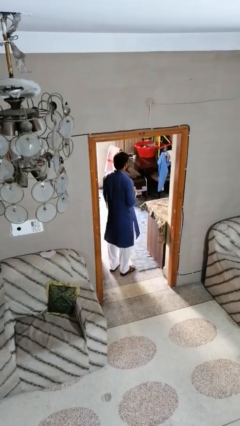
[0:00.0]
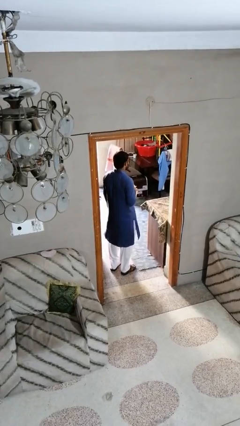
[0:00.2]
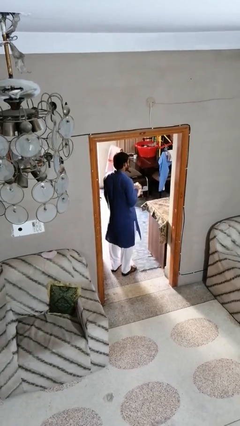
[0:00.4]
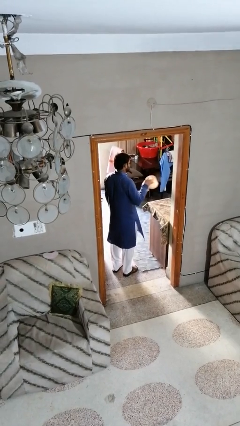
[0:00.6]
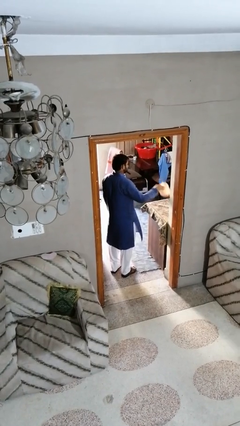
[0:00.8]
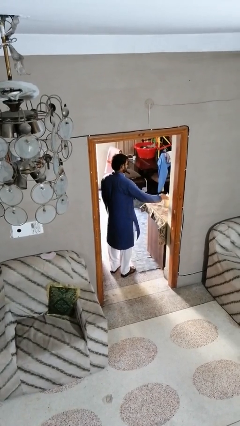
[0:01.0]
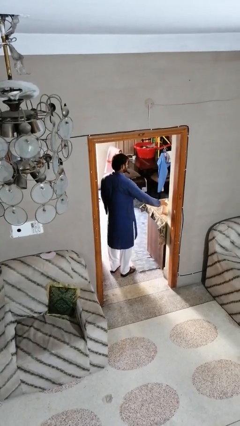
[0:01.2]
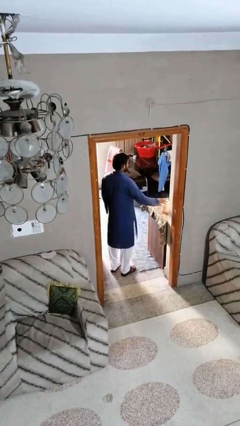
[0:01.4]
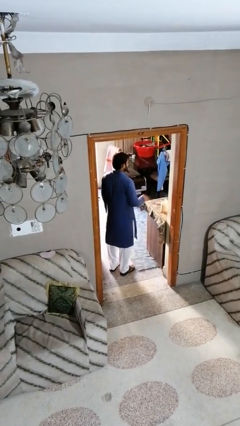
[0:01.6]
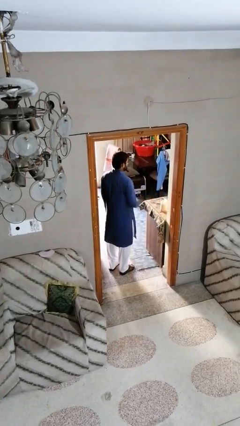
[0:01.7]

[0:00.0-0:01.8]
person puts down object on countertop

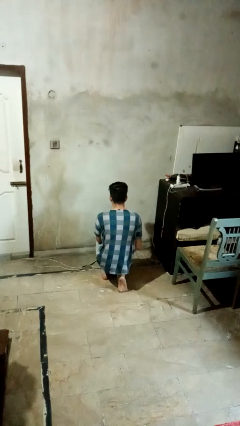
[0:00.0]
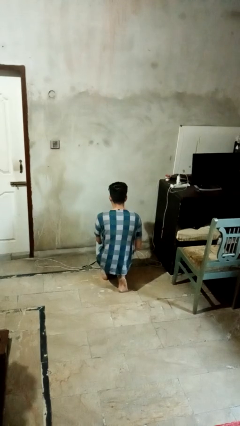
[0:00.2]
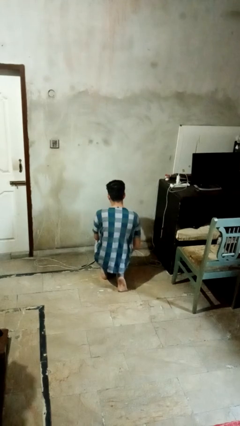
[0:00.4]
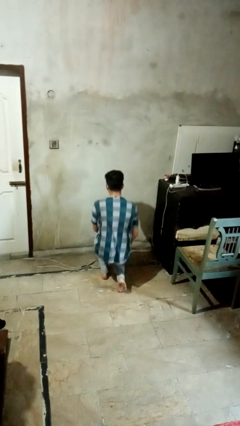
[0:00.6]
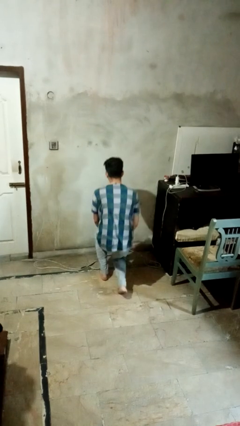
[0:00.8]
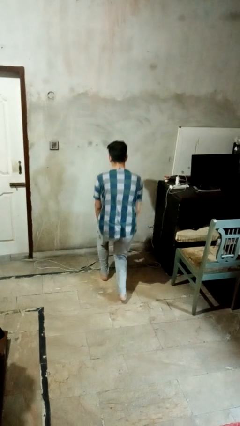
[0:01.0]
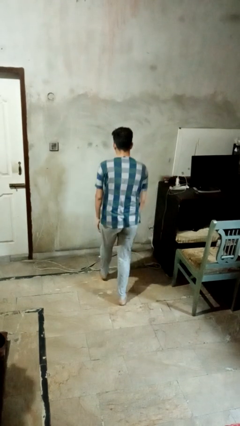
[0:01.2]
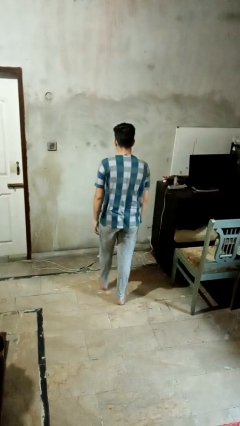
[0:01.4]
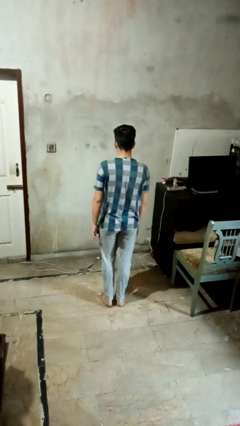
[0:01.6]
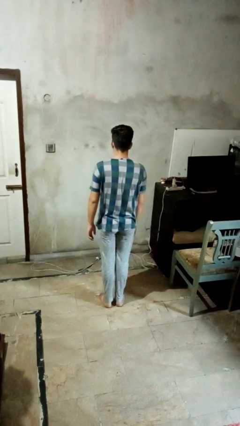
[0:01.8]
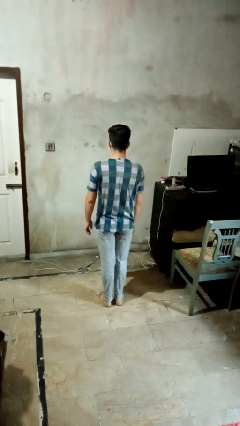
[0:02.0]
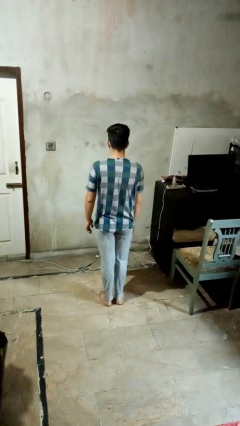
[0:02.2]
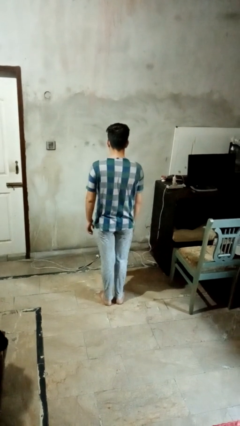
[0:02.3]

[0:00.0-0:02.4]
person stands up from floor

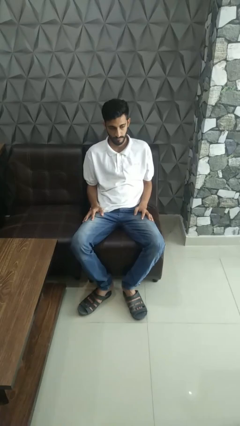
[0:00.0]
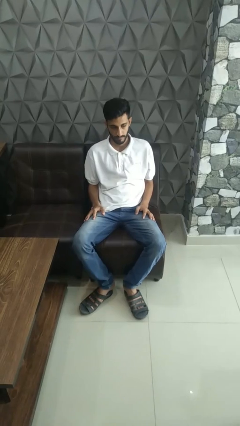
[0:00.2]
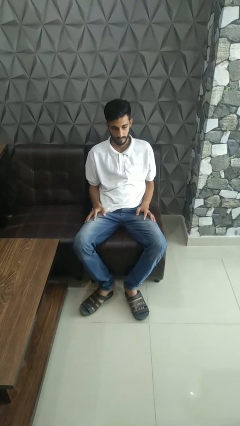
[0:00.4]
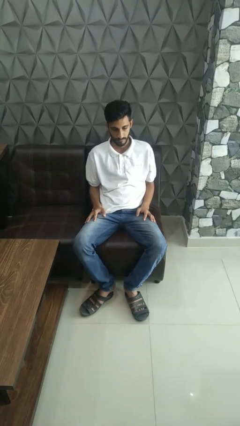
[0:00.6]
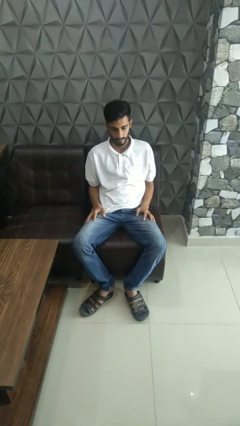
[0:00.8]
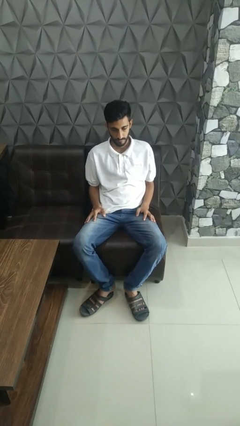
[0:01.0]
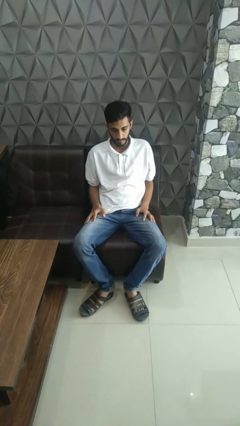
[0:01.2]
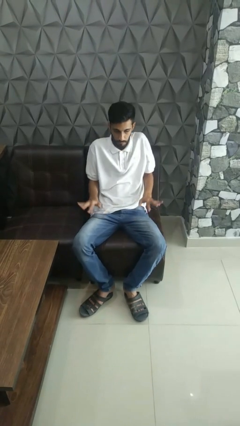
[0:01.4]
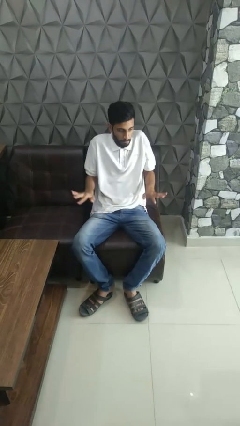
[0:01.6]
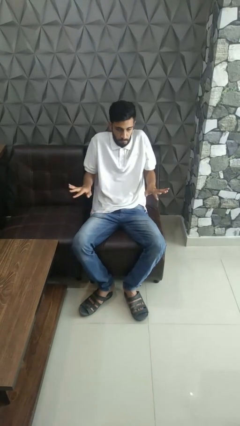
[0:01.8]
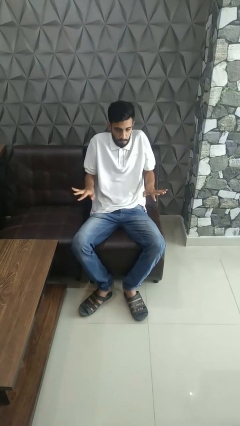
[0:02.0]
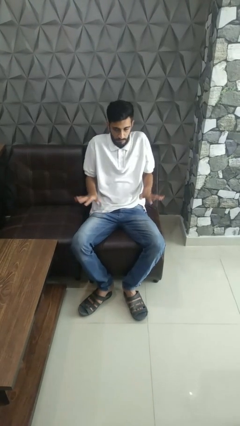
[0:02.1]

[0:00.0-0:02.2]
person shrugs

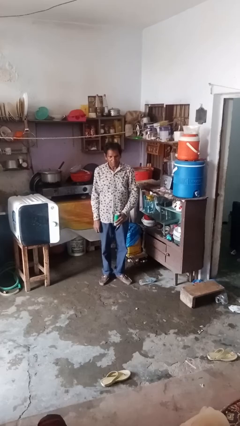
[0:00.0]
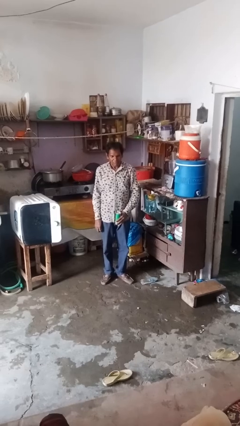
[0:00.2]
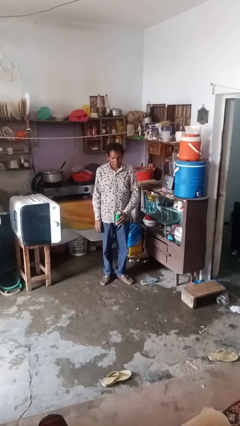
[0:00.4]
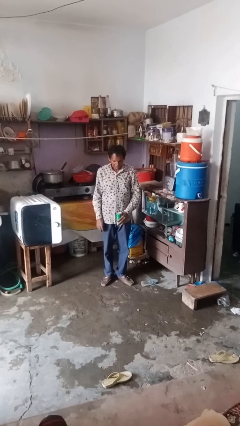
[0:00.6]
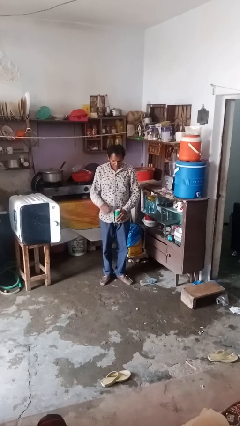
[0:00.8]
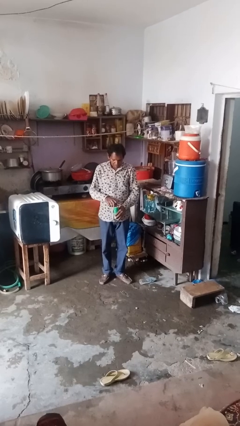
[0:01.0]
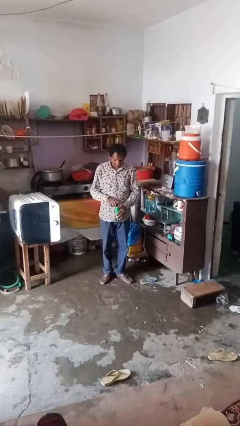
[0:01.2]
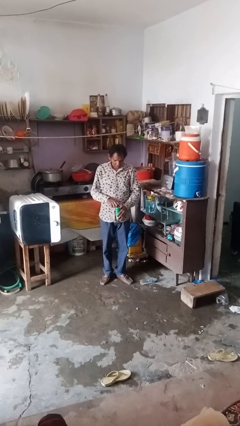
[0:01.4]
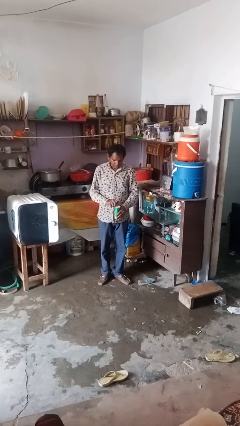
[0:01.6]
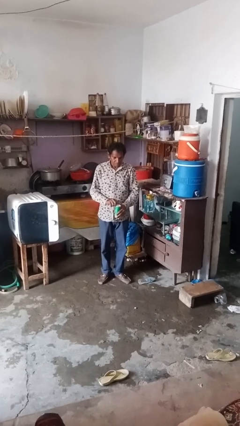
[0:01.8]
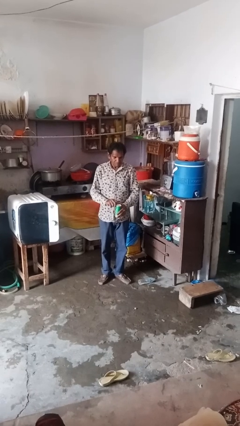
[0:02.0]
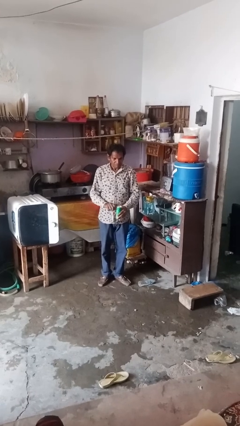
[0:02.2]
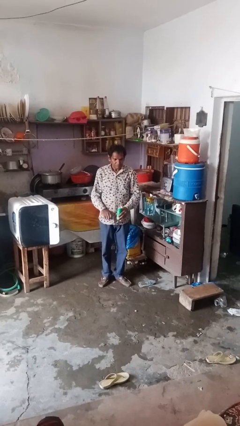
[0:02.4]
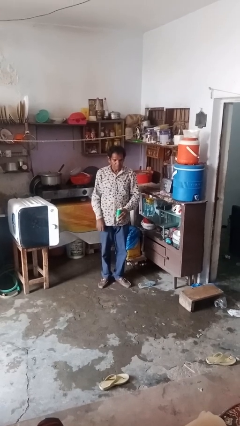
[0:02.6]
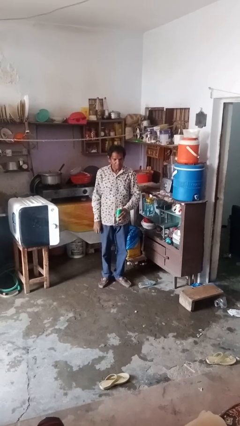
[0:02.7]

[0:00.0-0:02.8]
person opens beverage can

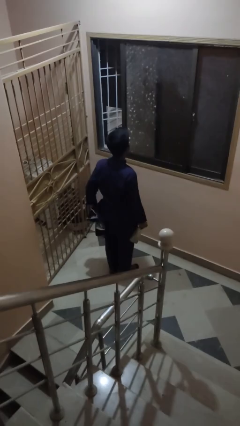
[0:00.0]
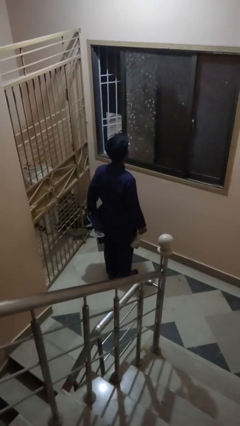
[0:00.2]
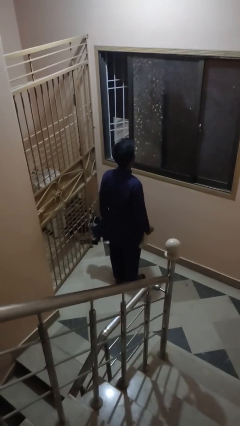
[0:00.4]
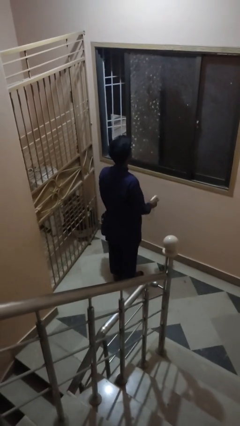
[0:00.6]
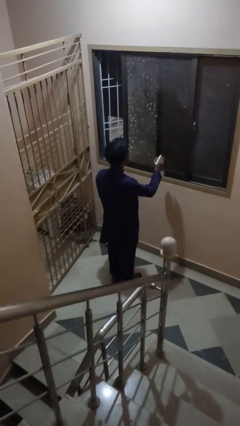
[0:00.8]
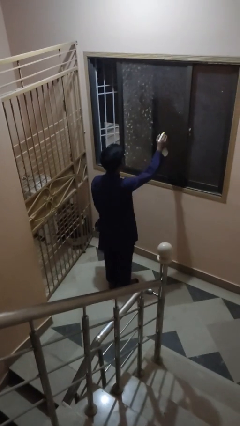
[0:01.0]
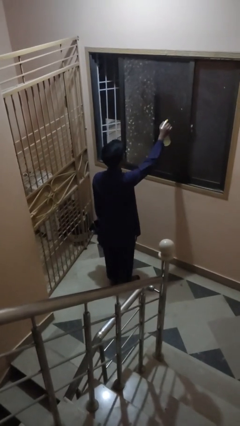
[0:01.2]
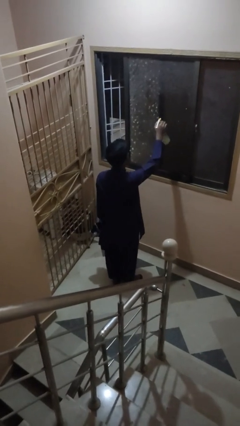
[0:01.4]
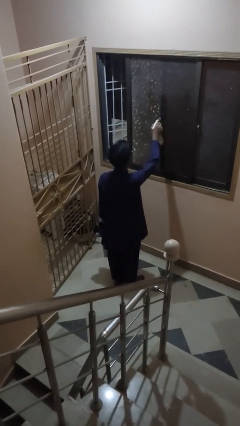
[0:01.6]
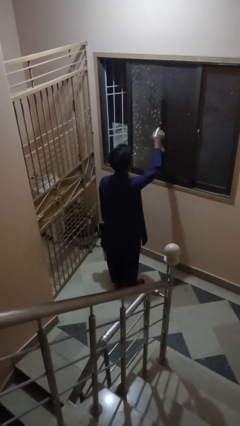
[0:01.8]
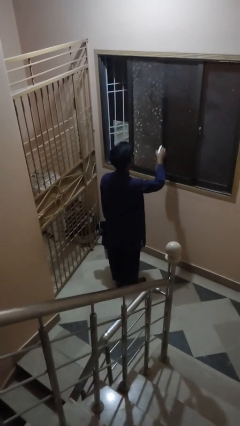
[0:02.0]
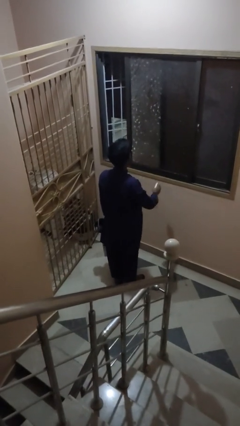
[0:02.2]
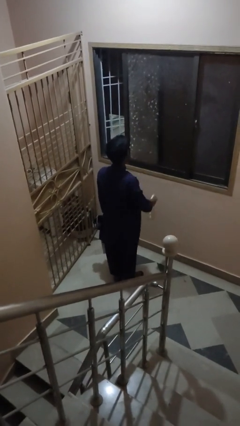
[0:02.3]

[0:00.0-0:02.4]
person sprays from bottle

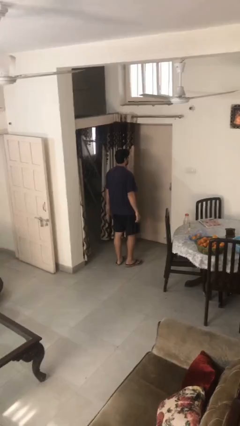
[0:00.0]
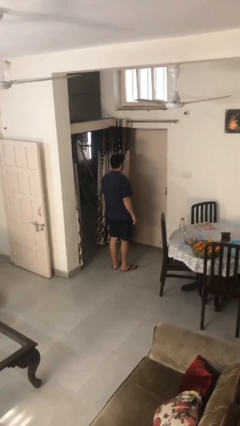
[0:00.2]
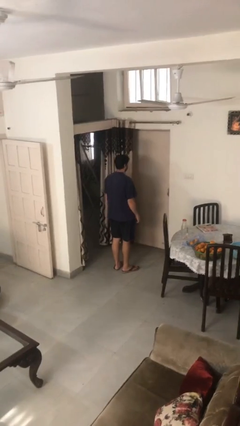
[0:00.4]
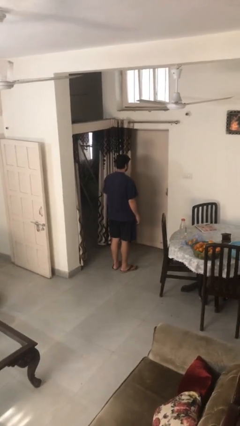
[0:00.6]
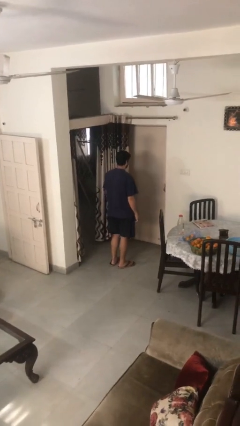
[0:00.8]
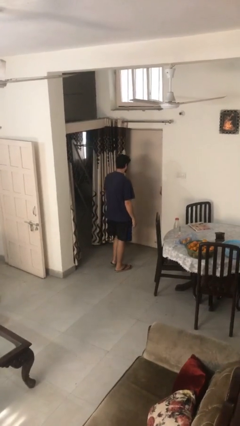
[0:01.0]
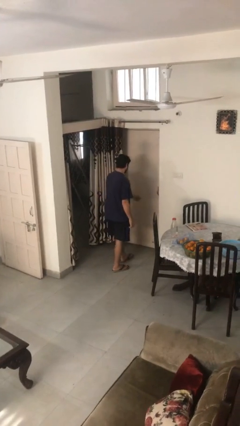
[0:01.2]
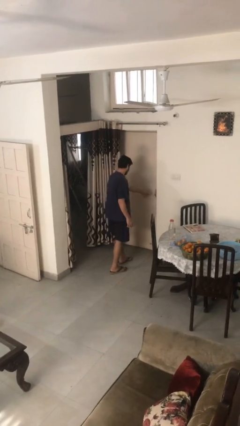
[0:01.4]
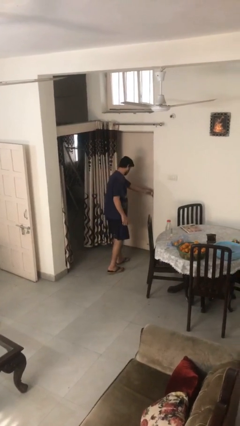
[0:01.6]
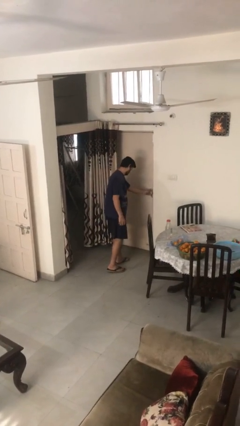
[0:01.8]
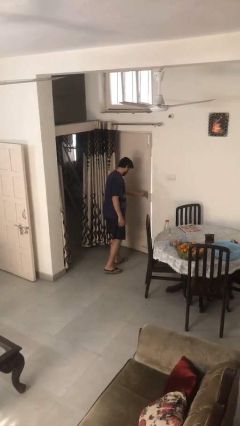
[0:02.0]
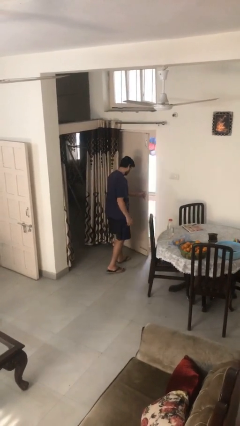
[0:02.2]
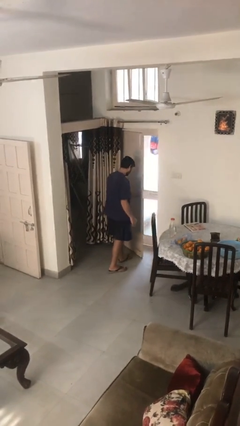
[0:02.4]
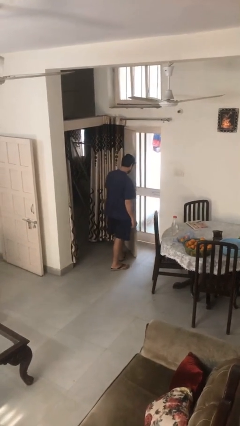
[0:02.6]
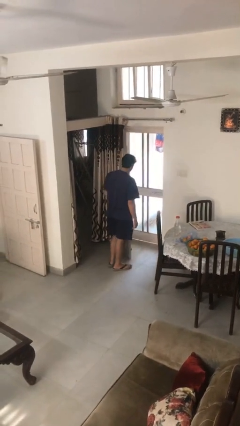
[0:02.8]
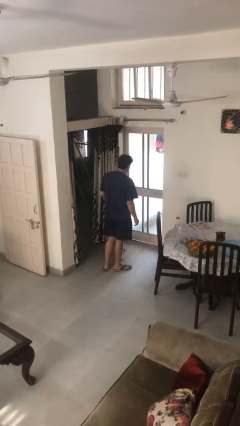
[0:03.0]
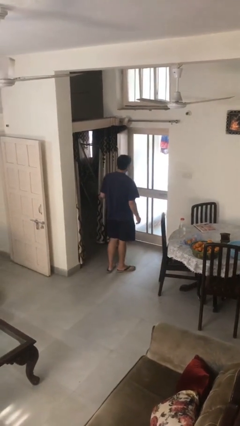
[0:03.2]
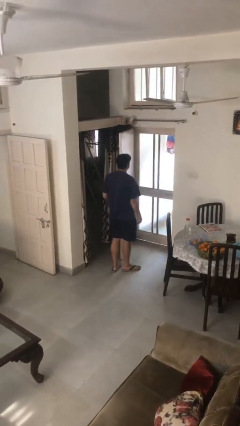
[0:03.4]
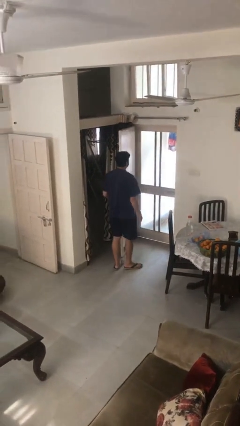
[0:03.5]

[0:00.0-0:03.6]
person opens facility door

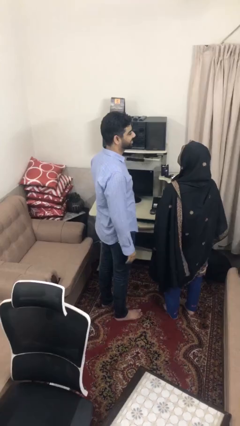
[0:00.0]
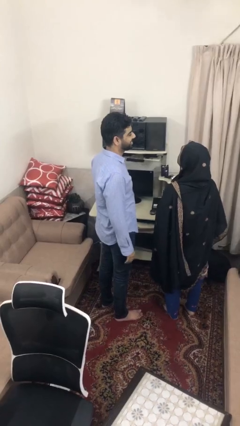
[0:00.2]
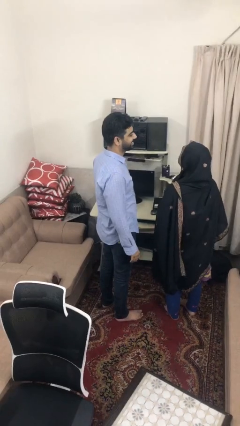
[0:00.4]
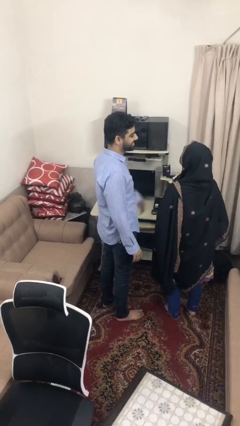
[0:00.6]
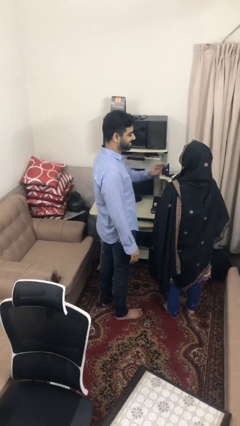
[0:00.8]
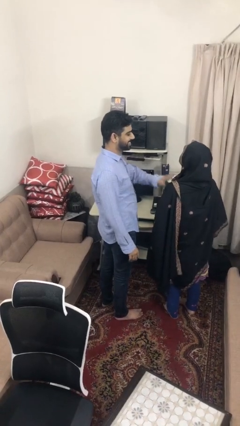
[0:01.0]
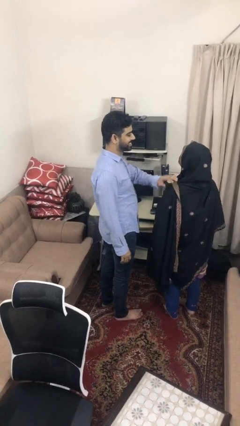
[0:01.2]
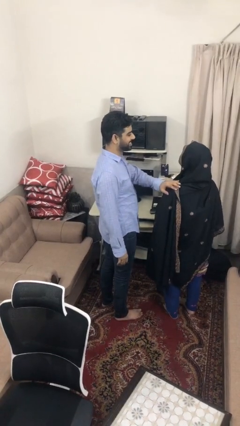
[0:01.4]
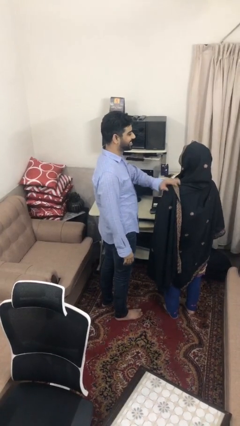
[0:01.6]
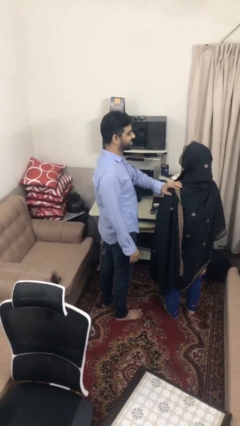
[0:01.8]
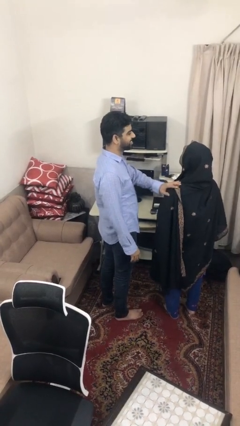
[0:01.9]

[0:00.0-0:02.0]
person pounds shoulders of person

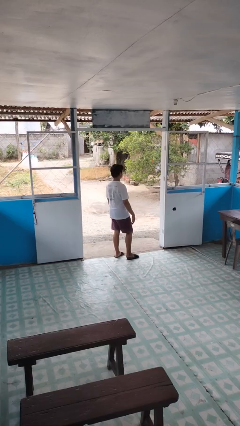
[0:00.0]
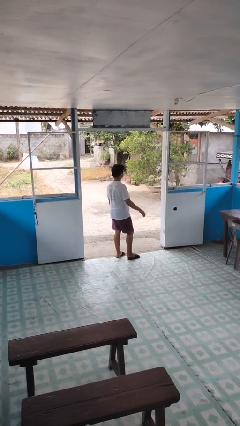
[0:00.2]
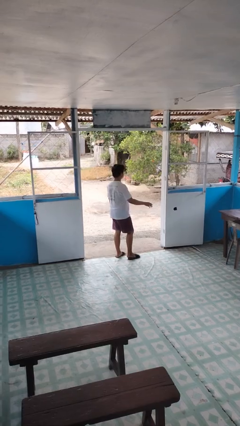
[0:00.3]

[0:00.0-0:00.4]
person slaps hands on thighs
